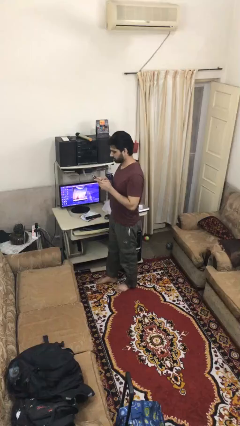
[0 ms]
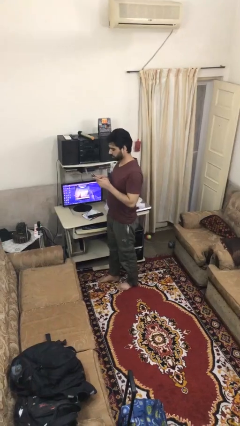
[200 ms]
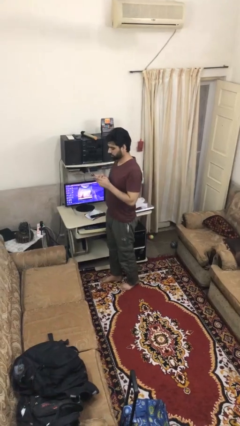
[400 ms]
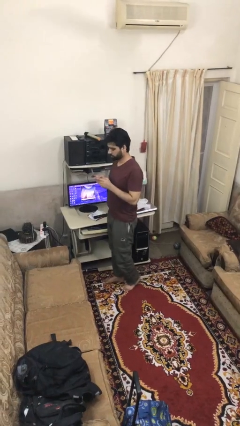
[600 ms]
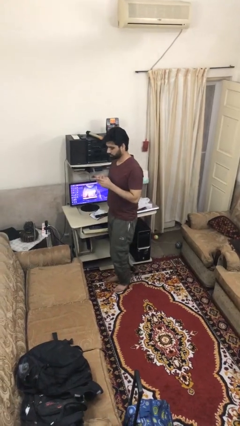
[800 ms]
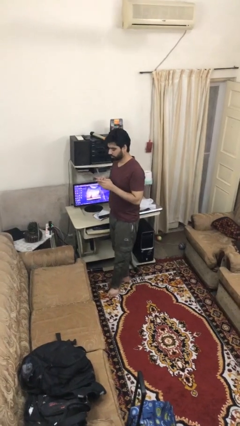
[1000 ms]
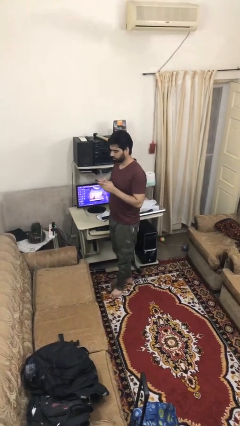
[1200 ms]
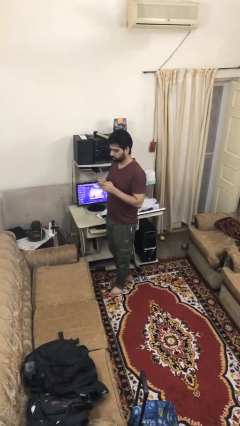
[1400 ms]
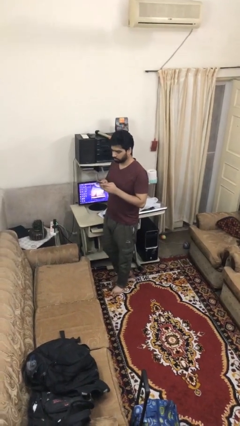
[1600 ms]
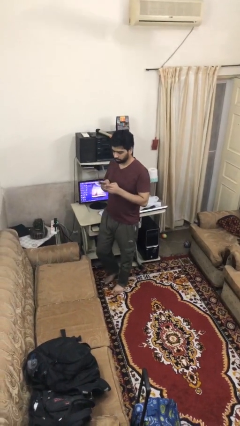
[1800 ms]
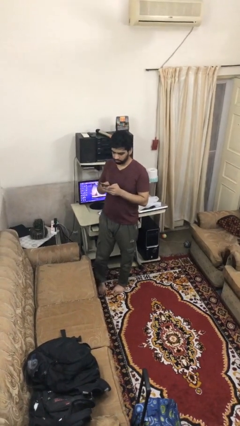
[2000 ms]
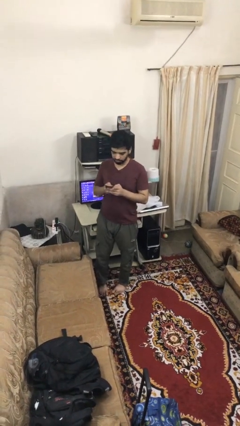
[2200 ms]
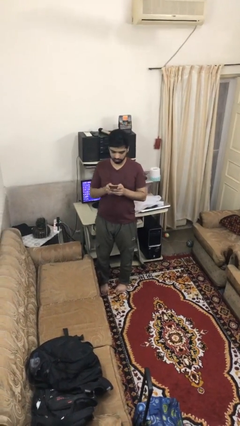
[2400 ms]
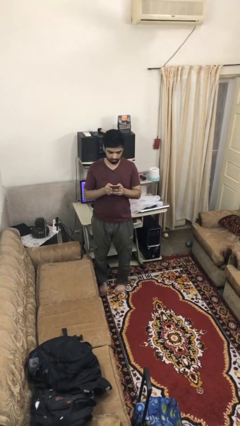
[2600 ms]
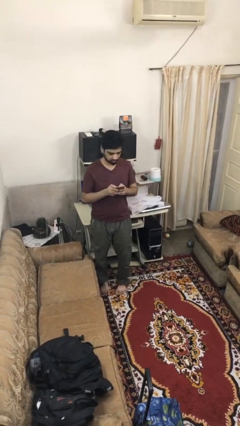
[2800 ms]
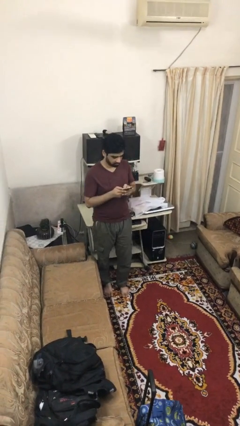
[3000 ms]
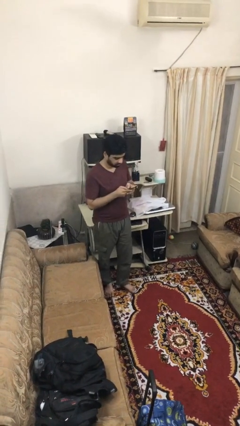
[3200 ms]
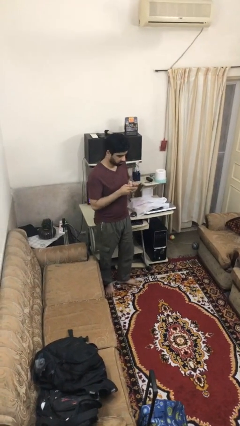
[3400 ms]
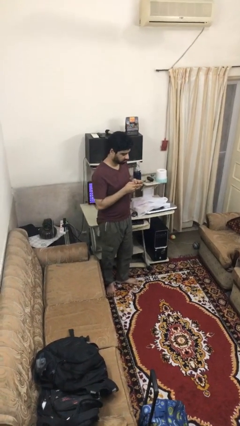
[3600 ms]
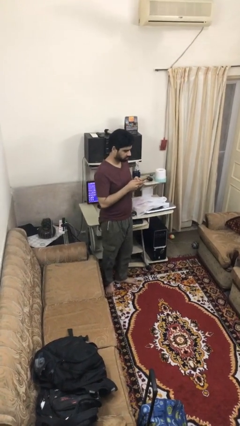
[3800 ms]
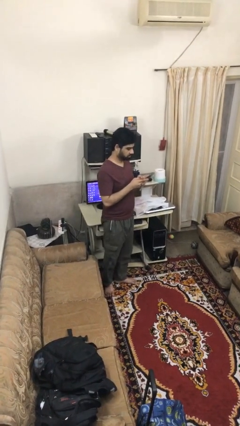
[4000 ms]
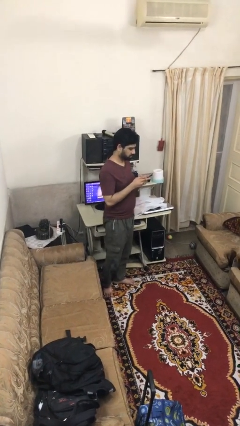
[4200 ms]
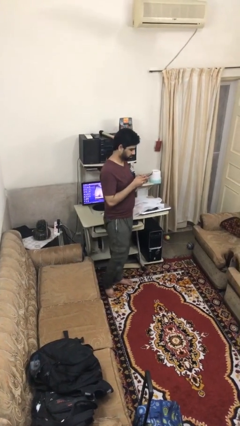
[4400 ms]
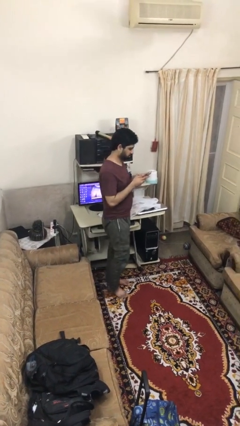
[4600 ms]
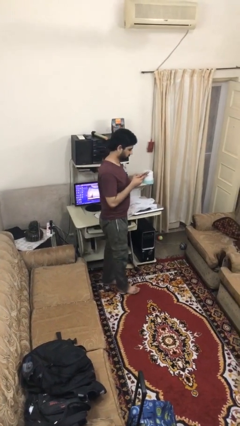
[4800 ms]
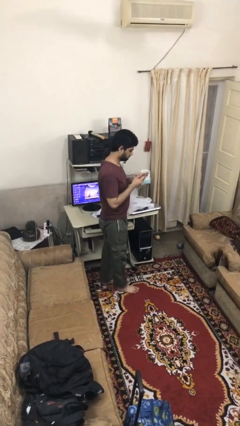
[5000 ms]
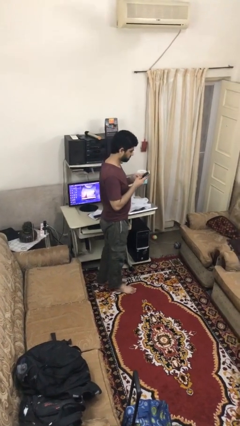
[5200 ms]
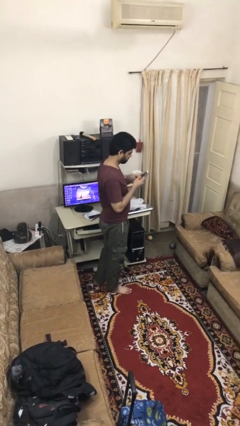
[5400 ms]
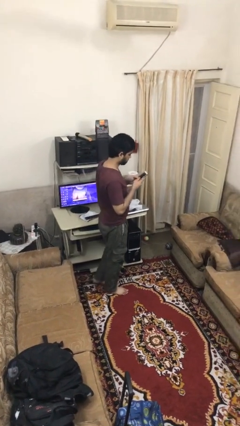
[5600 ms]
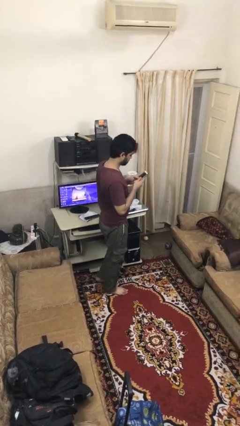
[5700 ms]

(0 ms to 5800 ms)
person texts on phone

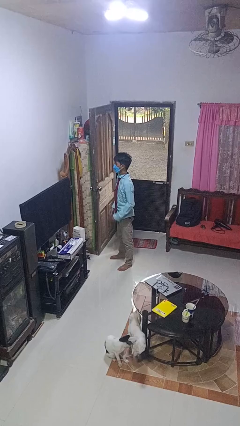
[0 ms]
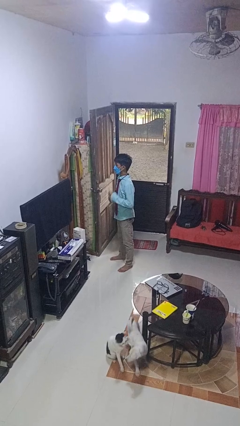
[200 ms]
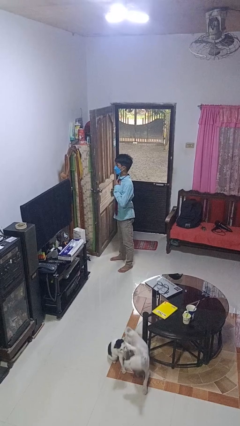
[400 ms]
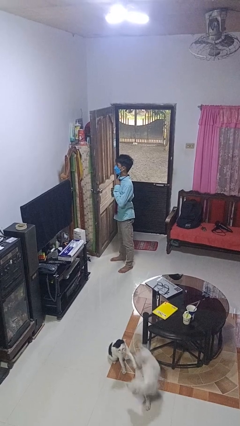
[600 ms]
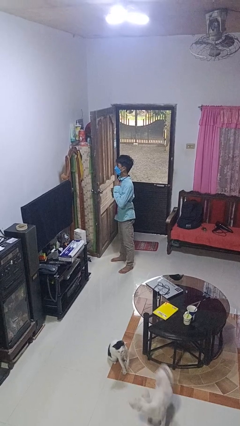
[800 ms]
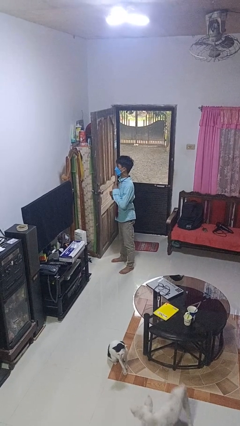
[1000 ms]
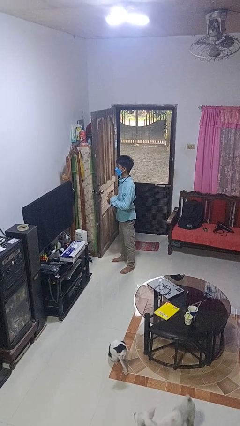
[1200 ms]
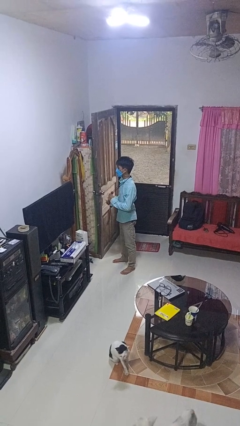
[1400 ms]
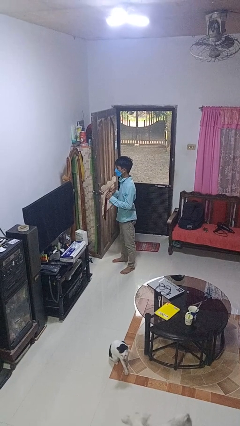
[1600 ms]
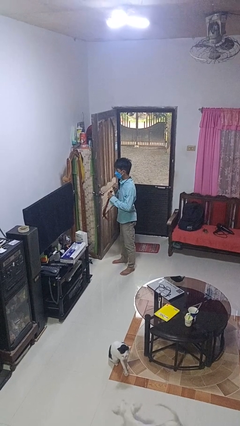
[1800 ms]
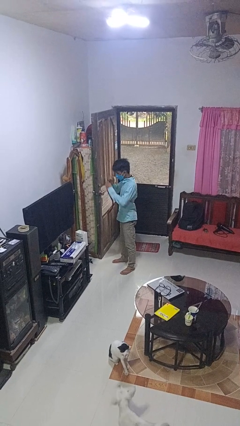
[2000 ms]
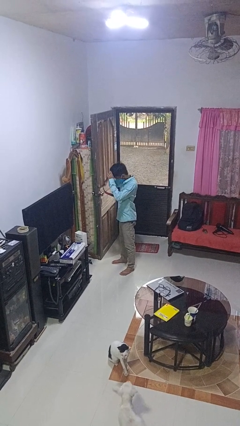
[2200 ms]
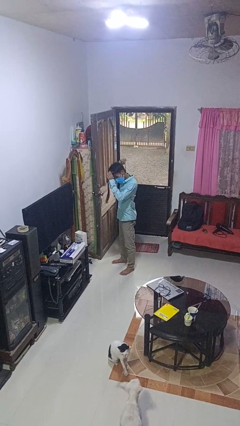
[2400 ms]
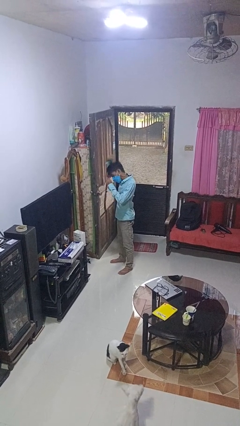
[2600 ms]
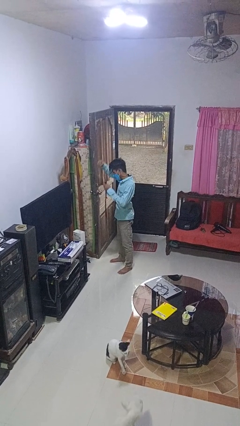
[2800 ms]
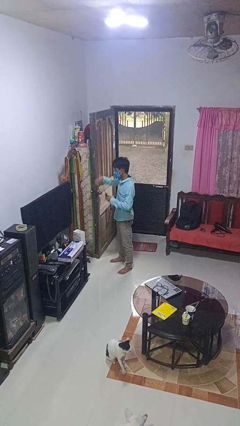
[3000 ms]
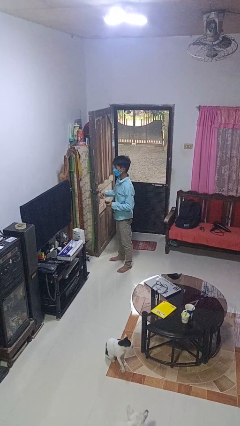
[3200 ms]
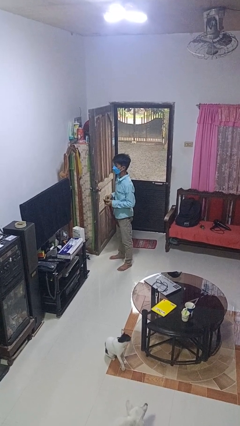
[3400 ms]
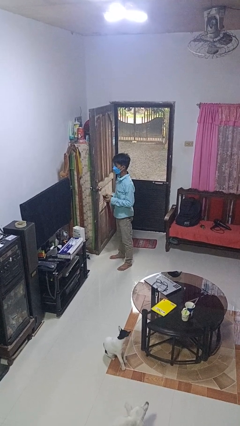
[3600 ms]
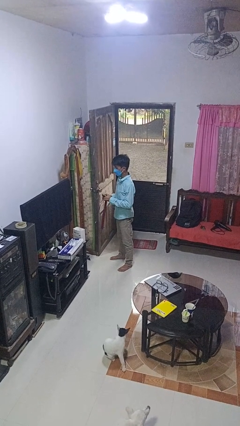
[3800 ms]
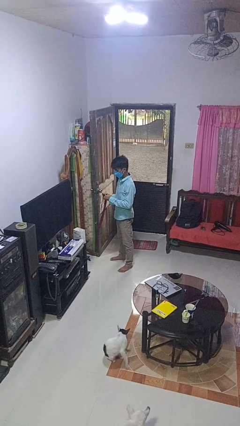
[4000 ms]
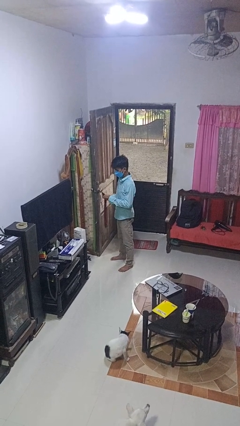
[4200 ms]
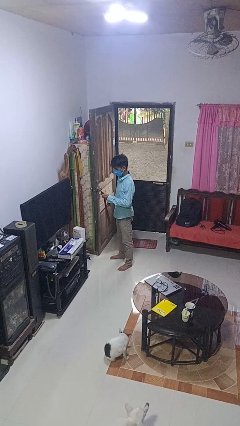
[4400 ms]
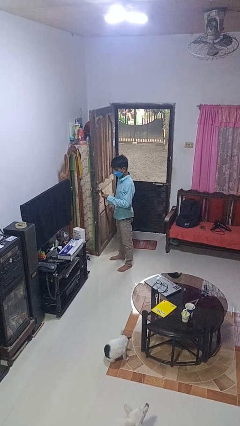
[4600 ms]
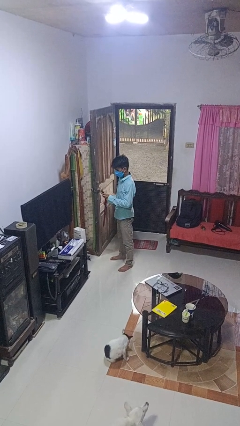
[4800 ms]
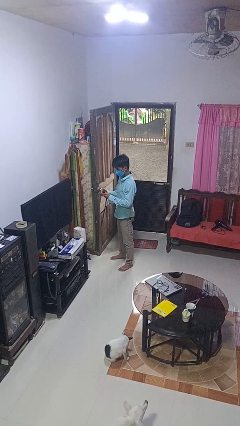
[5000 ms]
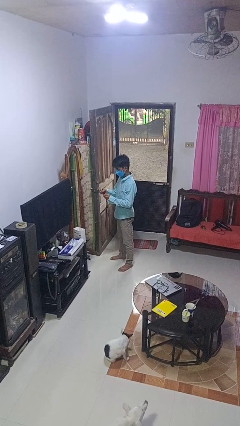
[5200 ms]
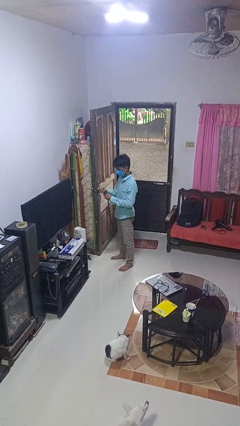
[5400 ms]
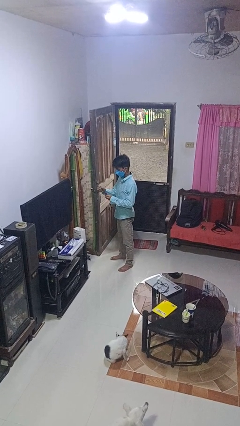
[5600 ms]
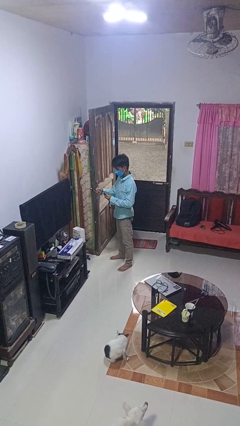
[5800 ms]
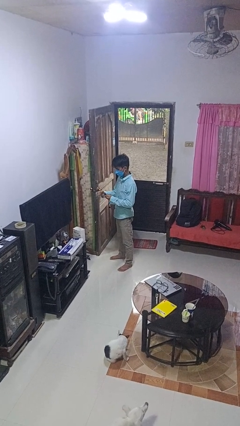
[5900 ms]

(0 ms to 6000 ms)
person takes off necktie

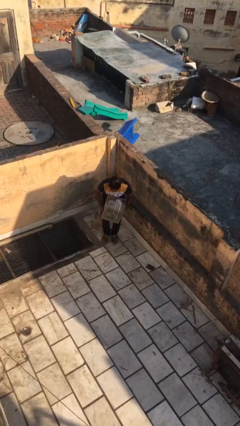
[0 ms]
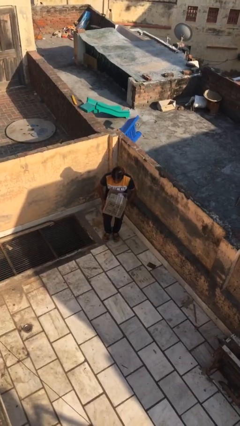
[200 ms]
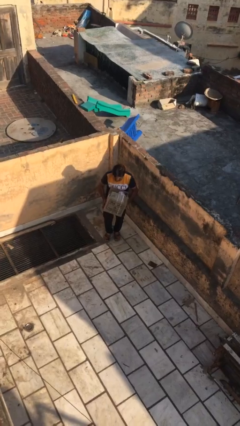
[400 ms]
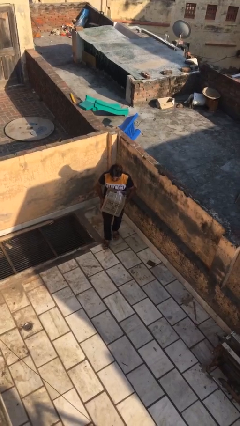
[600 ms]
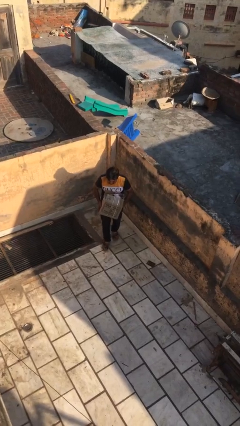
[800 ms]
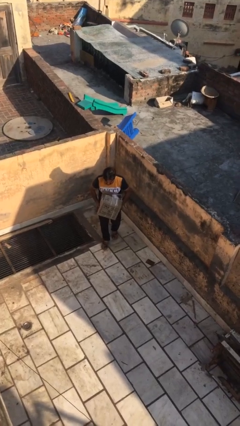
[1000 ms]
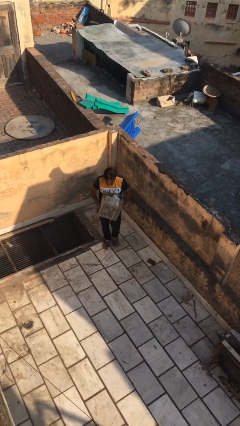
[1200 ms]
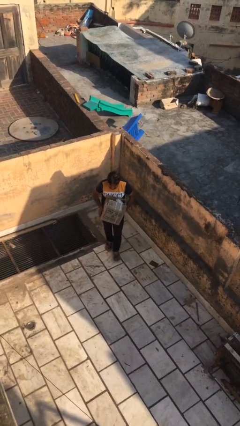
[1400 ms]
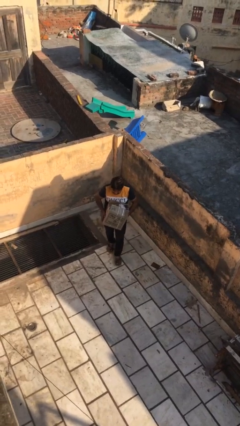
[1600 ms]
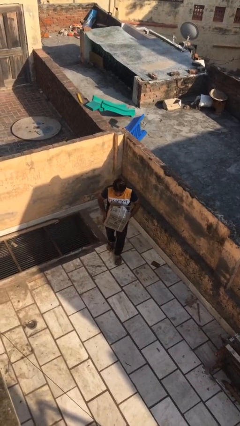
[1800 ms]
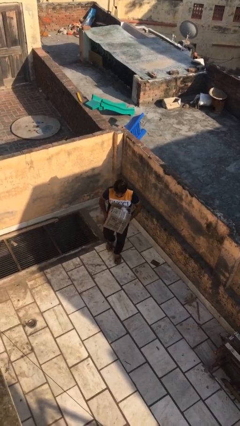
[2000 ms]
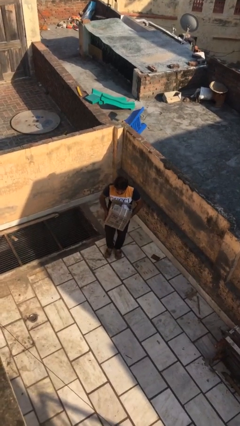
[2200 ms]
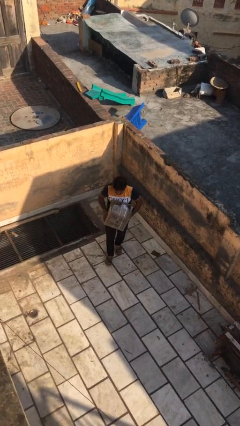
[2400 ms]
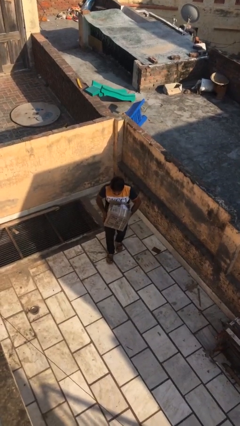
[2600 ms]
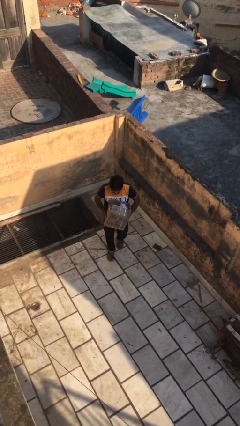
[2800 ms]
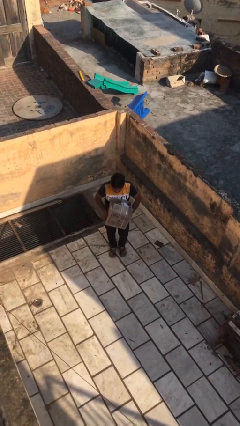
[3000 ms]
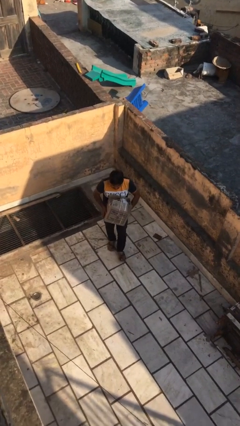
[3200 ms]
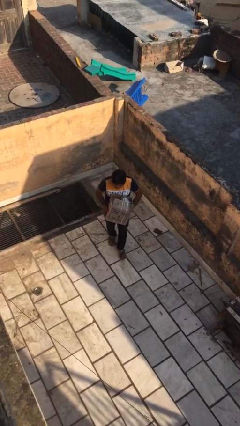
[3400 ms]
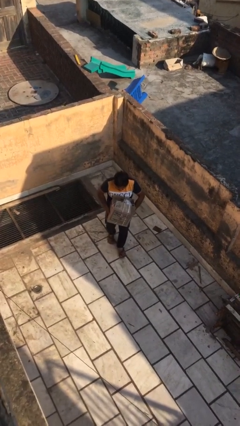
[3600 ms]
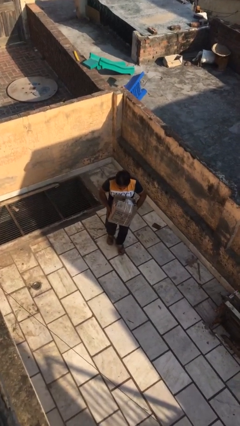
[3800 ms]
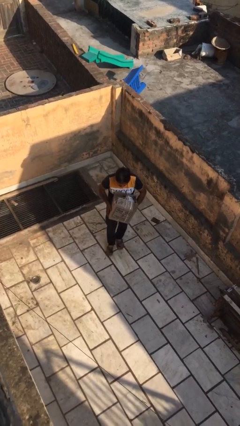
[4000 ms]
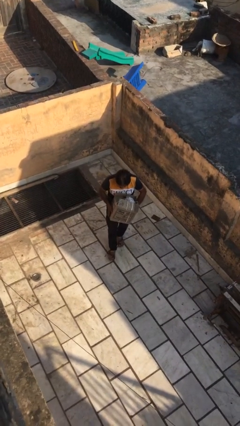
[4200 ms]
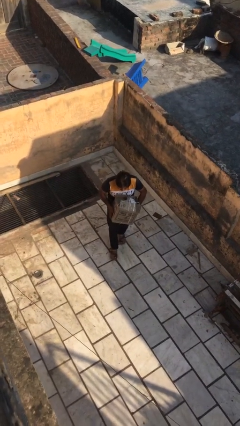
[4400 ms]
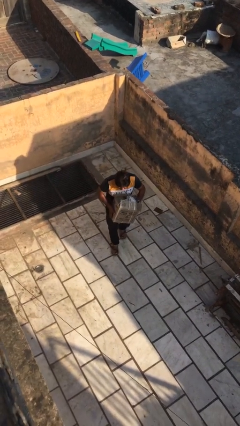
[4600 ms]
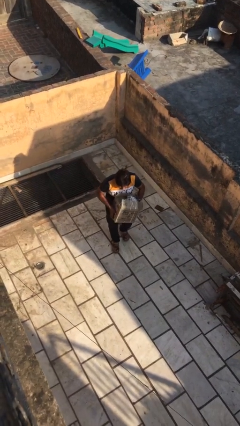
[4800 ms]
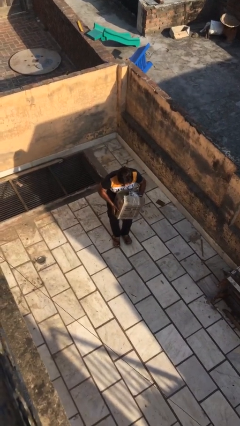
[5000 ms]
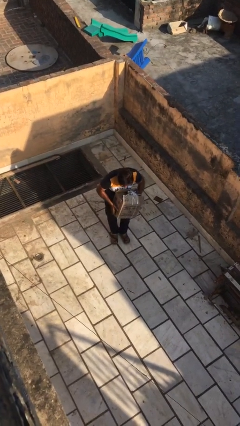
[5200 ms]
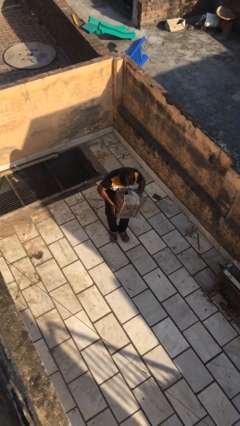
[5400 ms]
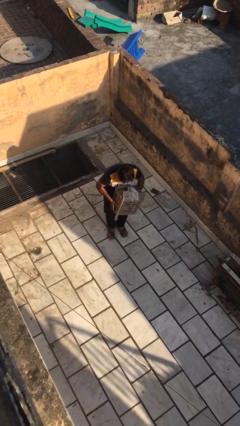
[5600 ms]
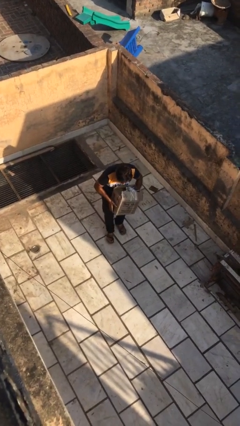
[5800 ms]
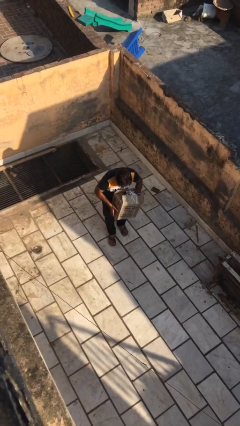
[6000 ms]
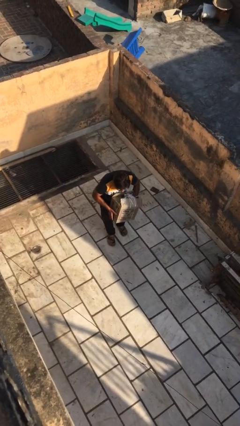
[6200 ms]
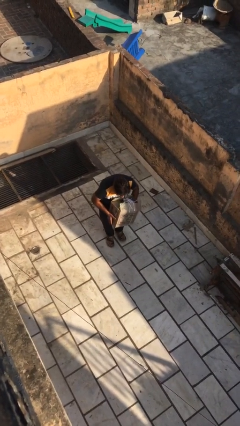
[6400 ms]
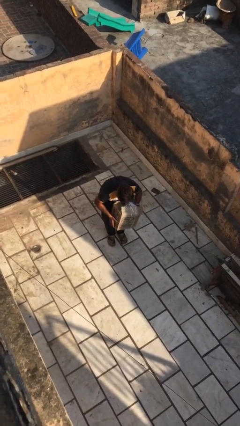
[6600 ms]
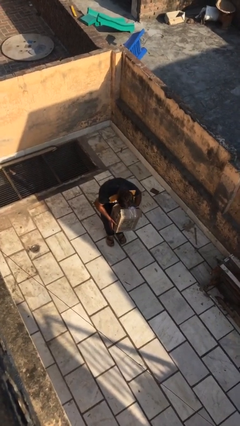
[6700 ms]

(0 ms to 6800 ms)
person carries heavy object
